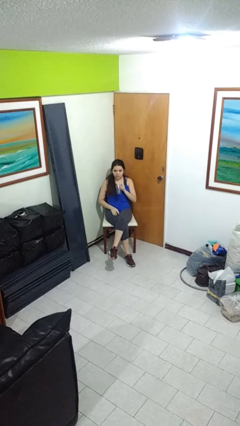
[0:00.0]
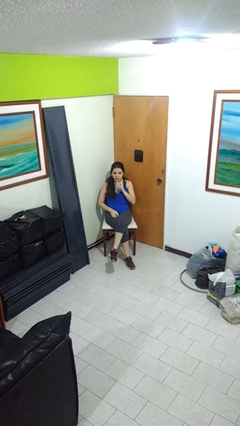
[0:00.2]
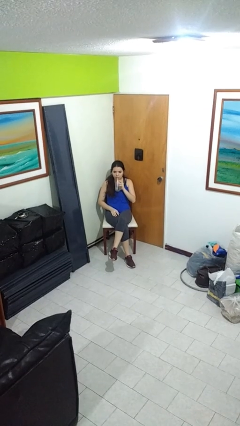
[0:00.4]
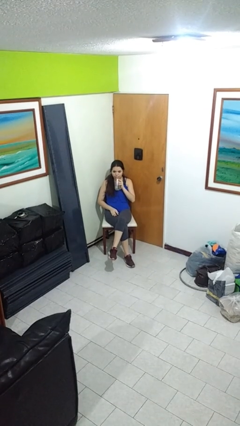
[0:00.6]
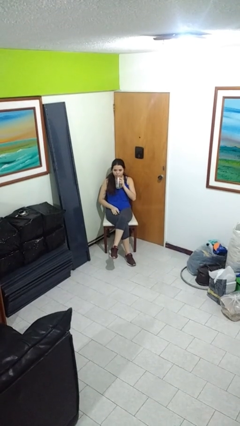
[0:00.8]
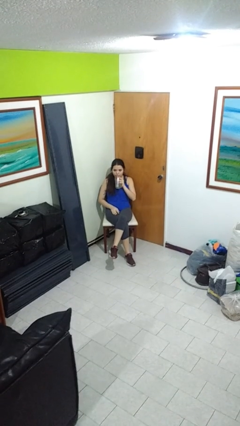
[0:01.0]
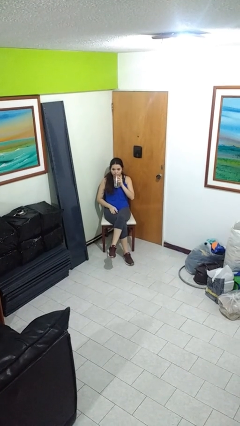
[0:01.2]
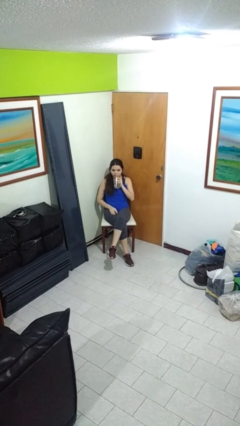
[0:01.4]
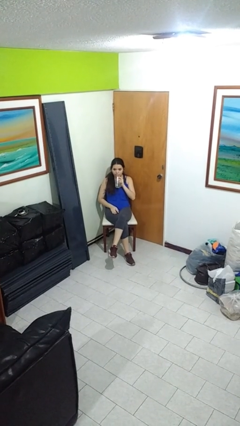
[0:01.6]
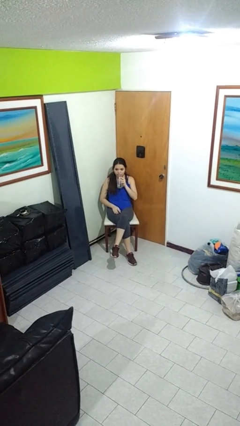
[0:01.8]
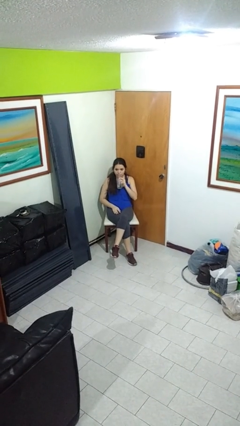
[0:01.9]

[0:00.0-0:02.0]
person drinks from straw

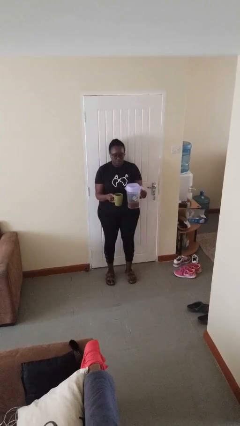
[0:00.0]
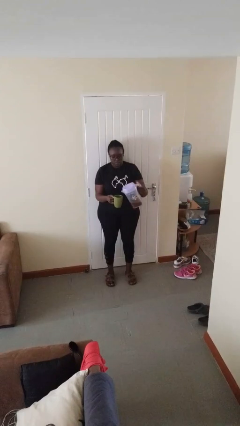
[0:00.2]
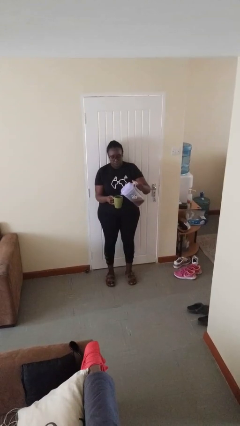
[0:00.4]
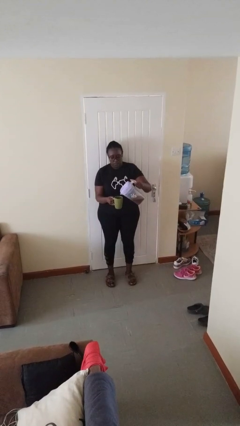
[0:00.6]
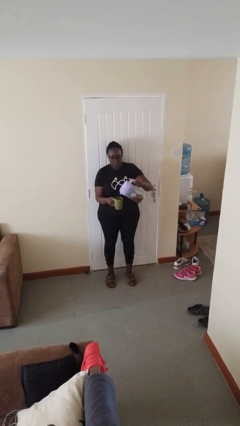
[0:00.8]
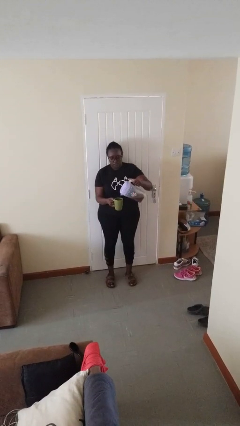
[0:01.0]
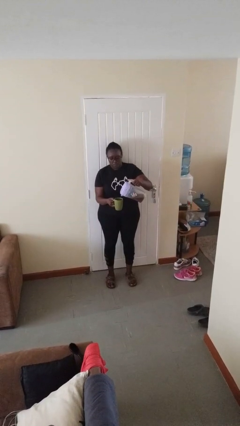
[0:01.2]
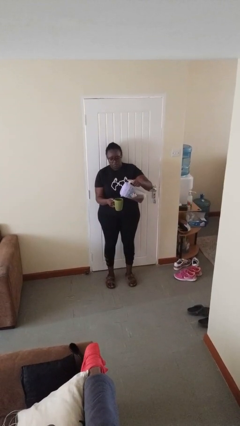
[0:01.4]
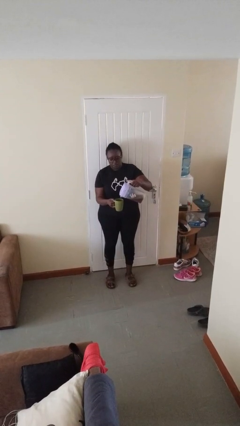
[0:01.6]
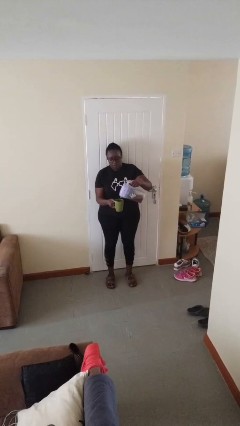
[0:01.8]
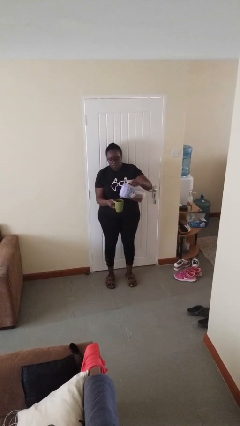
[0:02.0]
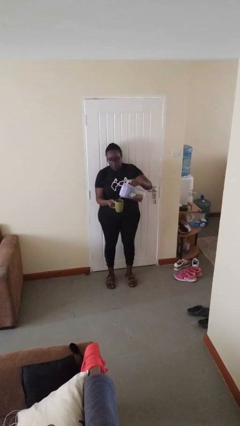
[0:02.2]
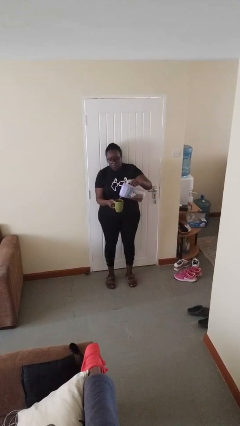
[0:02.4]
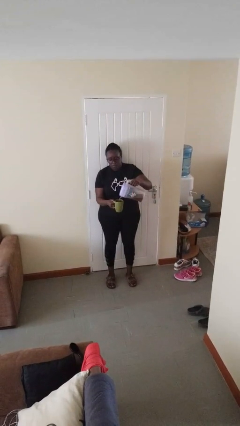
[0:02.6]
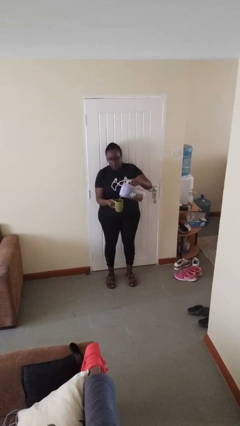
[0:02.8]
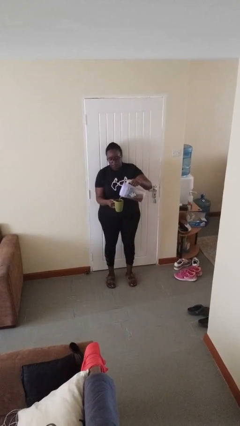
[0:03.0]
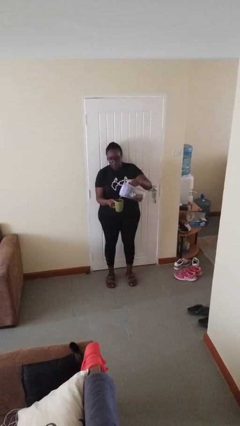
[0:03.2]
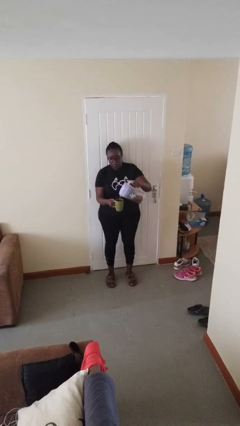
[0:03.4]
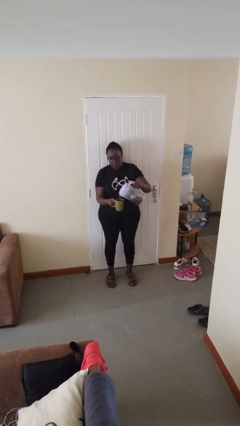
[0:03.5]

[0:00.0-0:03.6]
person pours coffee into mug

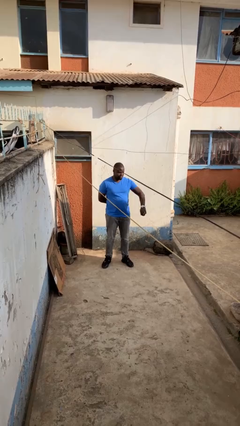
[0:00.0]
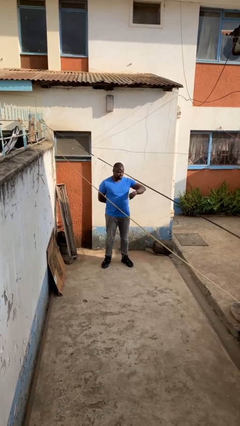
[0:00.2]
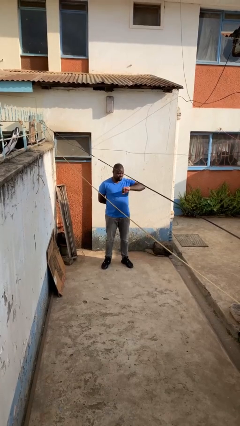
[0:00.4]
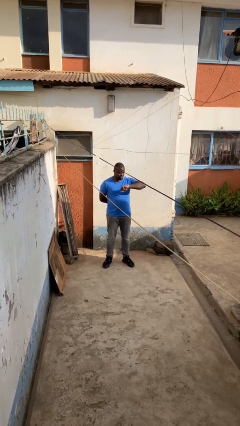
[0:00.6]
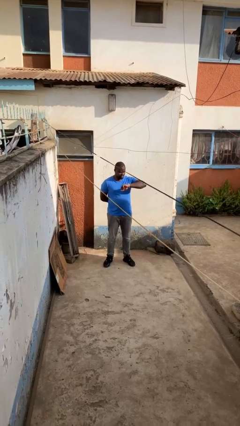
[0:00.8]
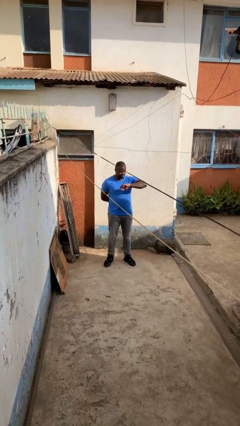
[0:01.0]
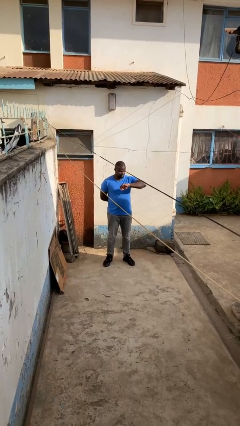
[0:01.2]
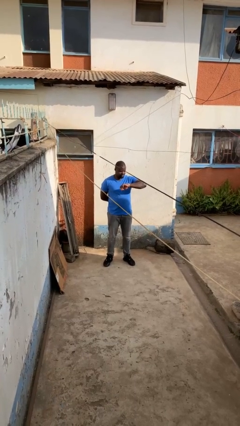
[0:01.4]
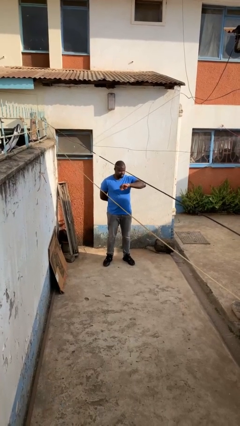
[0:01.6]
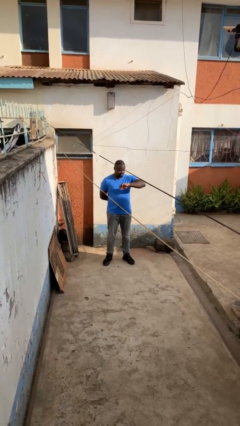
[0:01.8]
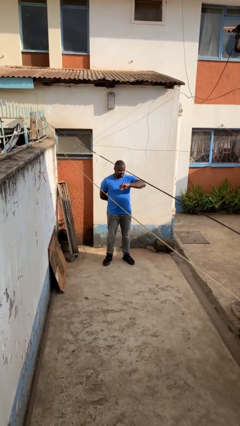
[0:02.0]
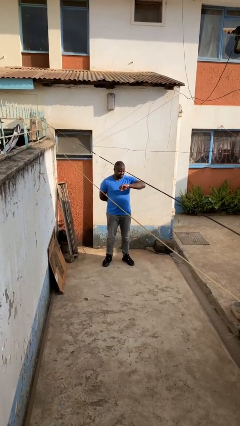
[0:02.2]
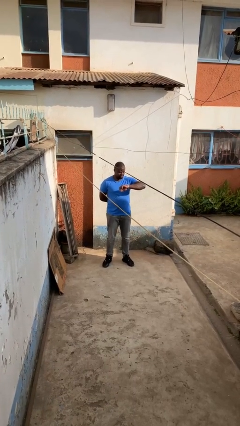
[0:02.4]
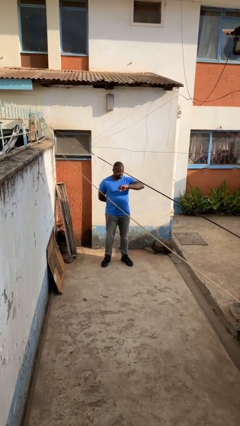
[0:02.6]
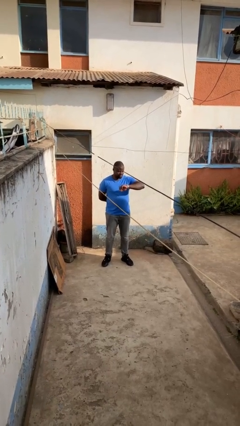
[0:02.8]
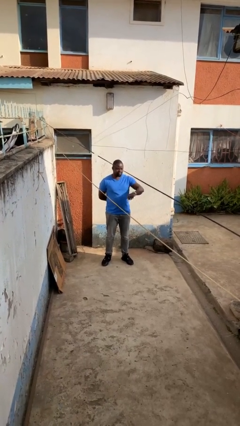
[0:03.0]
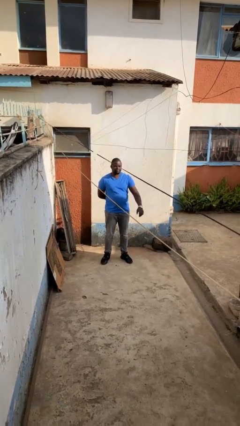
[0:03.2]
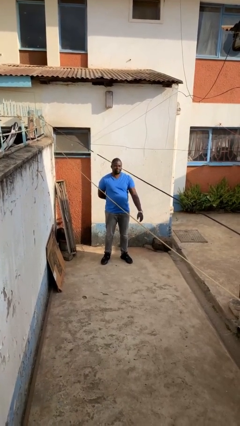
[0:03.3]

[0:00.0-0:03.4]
person looks at wristwatch

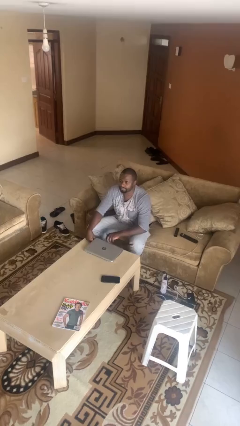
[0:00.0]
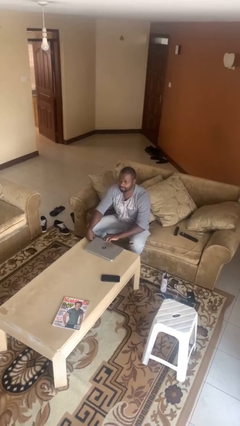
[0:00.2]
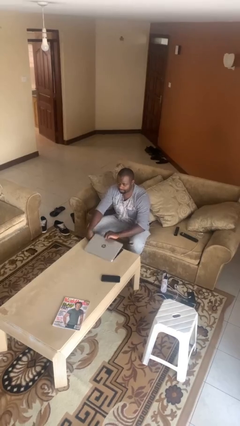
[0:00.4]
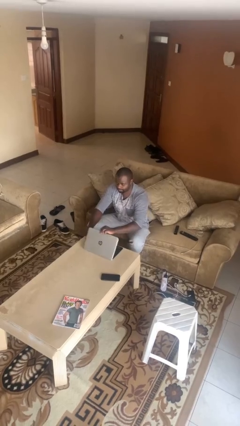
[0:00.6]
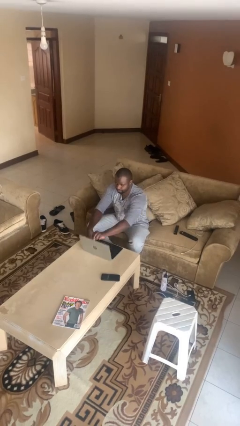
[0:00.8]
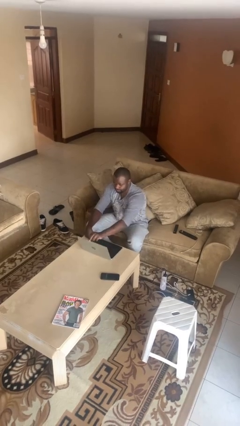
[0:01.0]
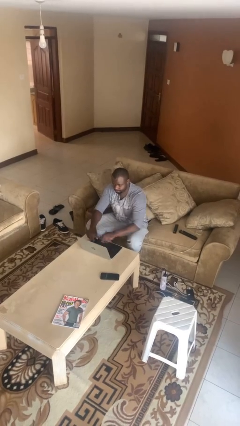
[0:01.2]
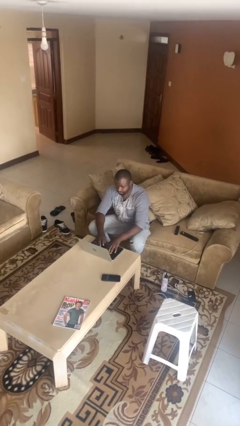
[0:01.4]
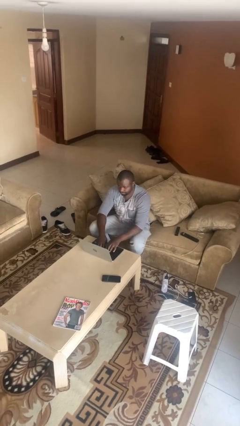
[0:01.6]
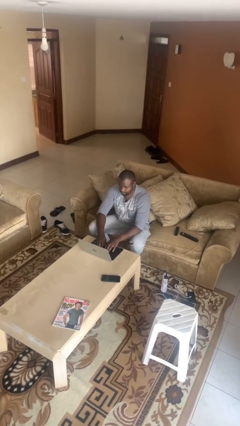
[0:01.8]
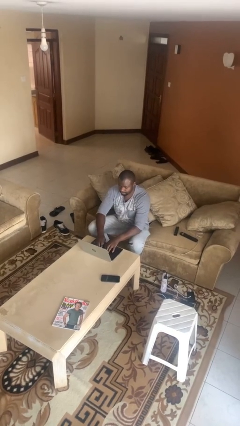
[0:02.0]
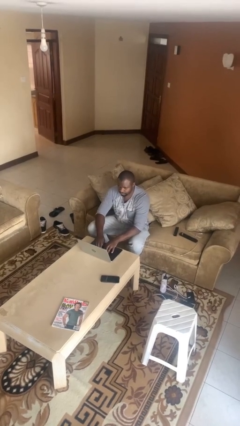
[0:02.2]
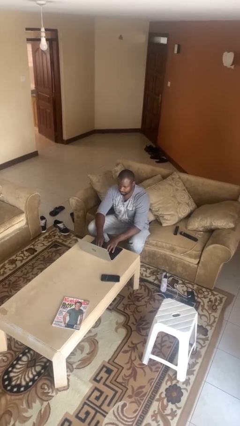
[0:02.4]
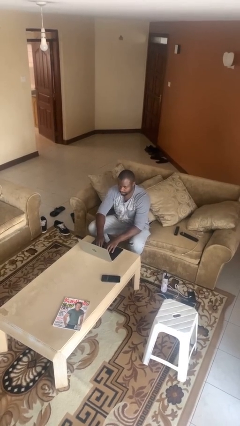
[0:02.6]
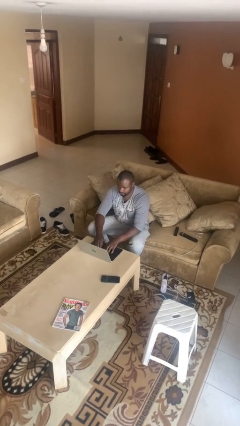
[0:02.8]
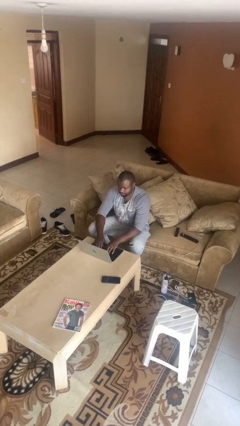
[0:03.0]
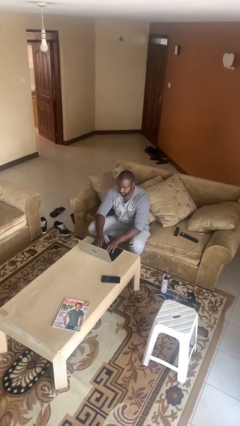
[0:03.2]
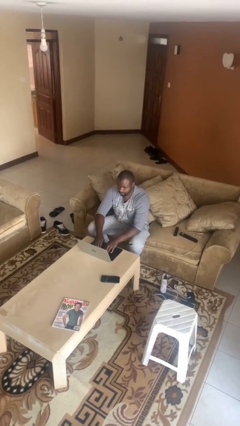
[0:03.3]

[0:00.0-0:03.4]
person interacts with laptop

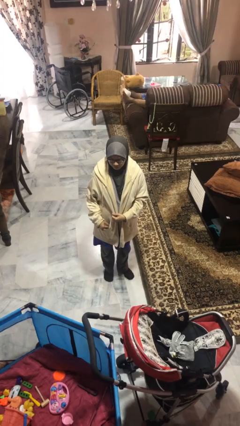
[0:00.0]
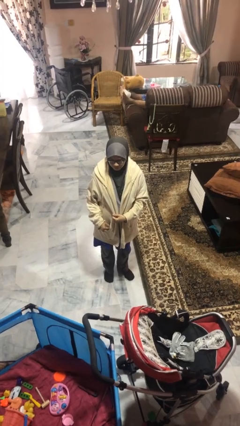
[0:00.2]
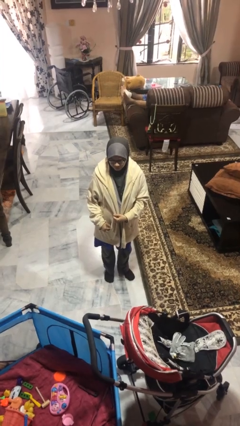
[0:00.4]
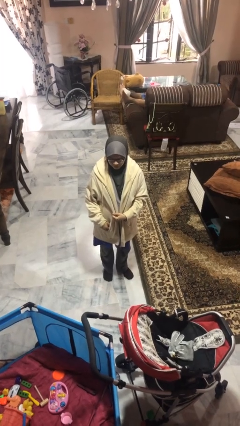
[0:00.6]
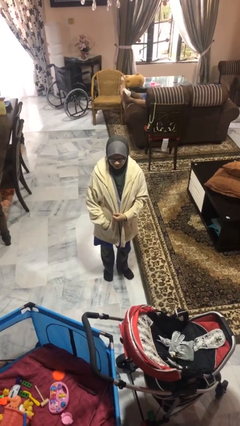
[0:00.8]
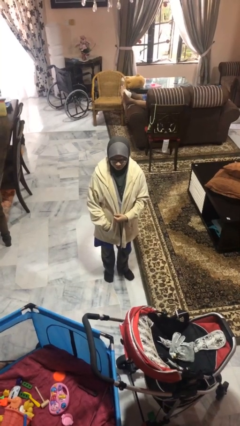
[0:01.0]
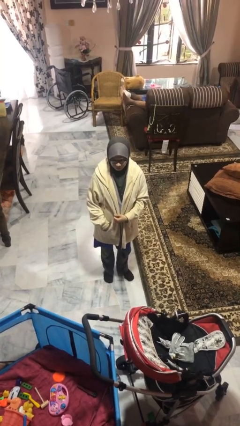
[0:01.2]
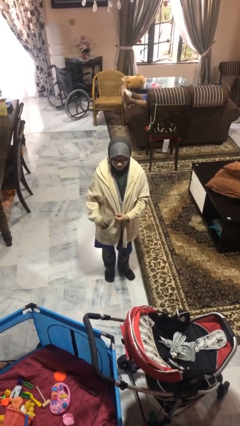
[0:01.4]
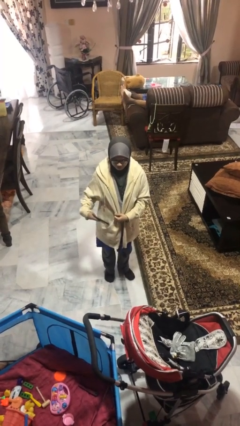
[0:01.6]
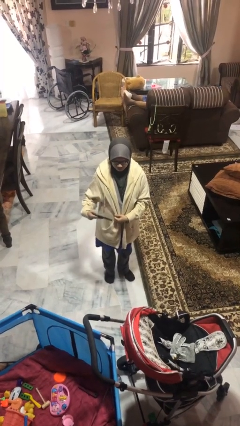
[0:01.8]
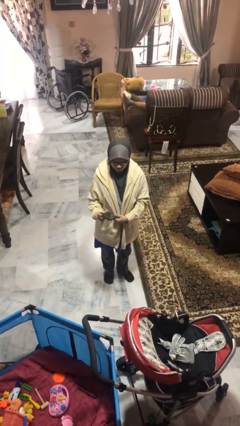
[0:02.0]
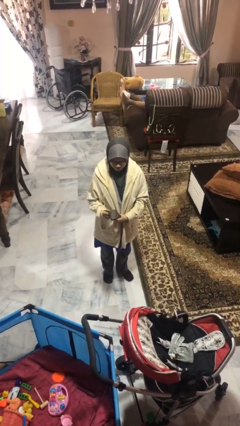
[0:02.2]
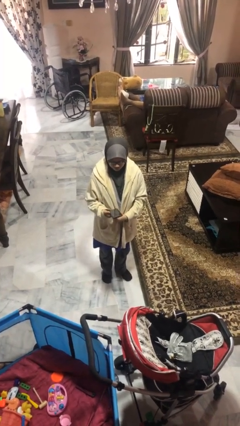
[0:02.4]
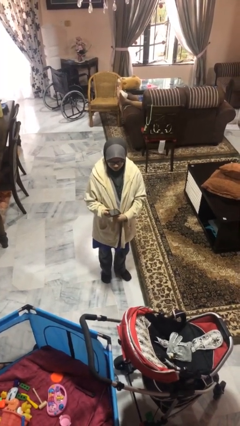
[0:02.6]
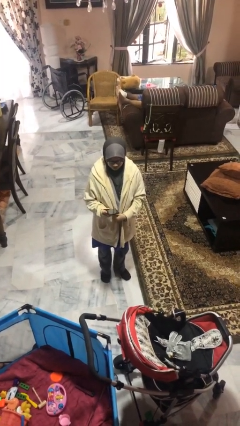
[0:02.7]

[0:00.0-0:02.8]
person takes phone from pocket

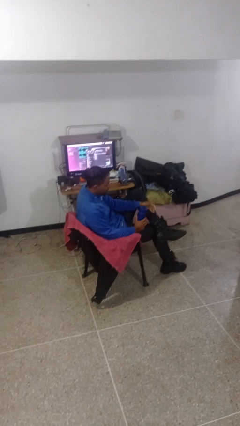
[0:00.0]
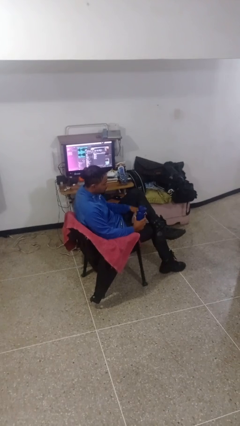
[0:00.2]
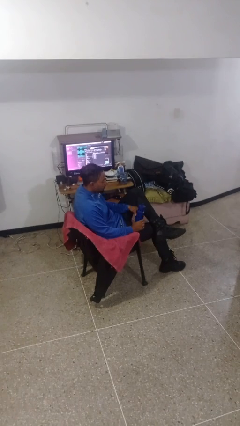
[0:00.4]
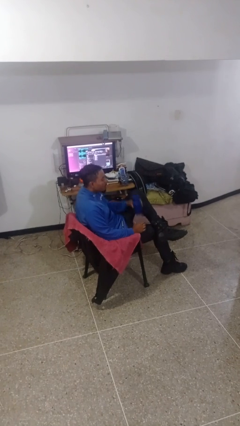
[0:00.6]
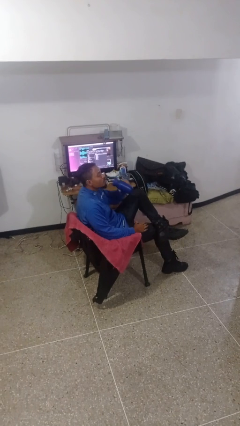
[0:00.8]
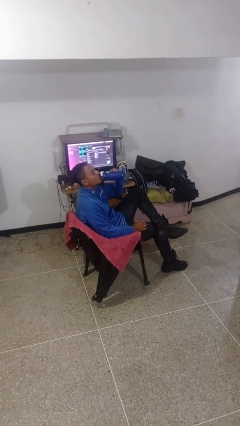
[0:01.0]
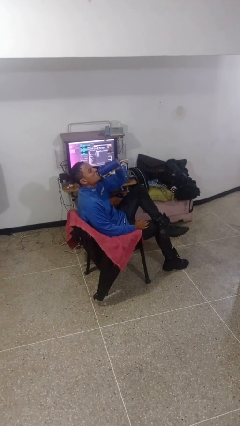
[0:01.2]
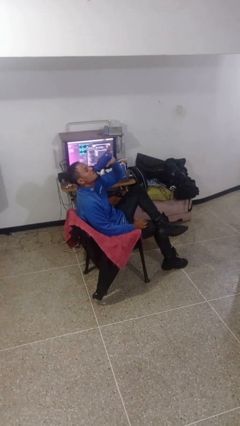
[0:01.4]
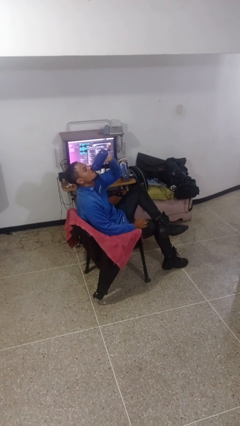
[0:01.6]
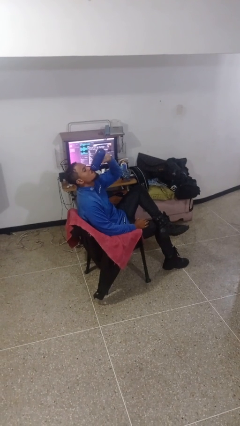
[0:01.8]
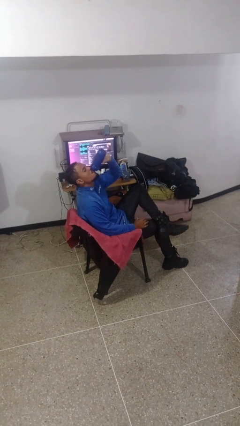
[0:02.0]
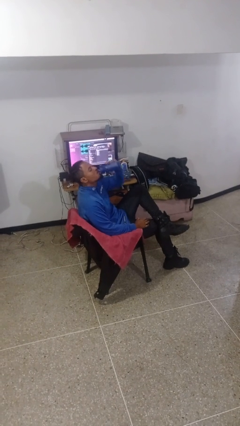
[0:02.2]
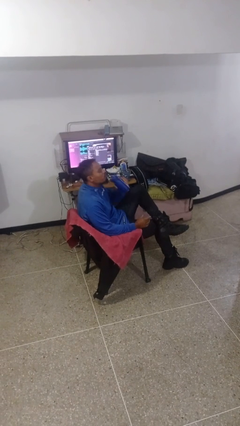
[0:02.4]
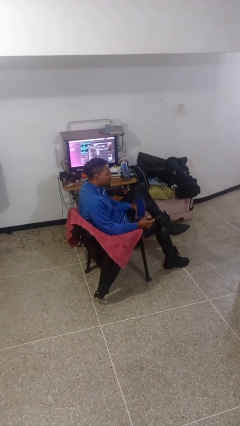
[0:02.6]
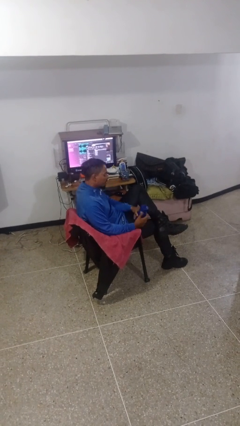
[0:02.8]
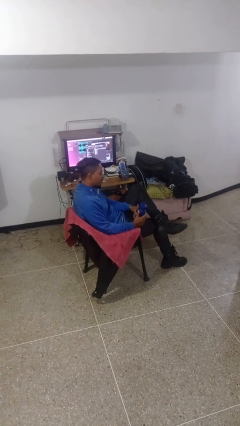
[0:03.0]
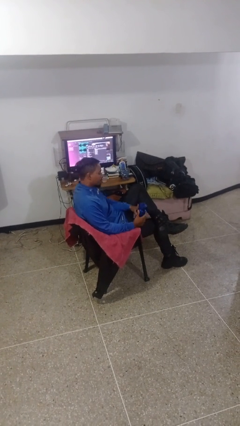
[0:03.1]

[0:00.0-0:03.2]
person drinks from bottle
